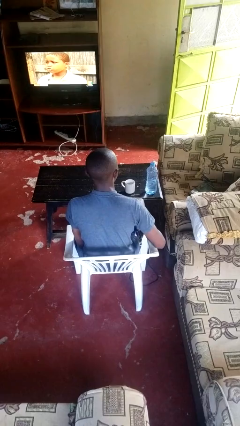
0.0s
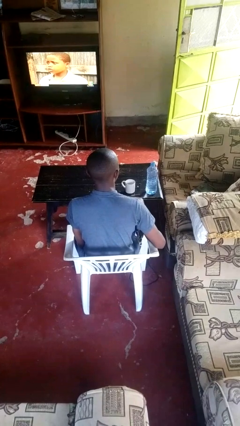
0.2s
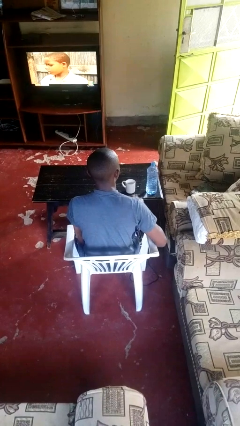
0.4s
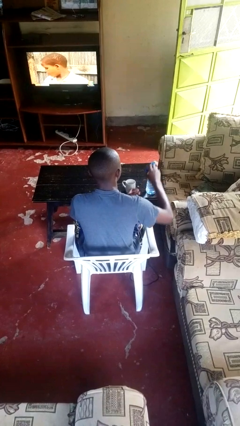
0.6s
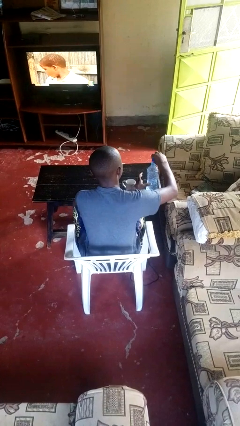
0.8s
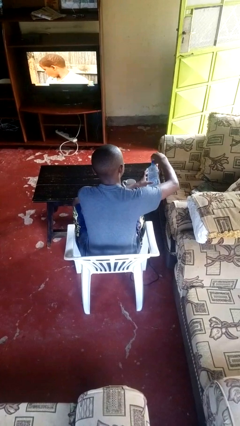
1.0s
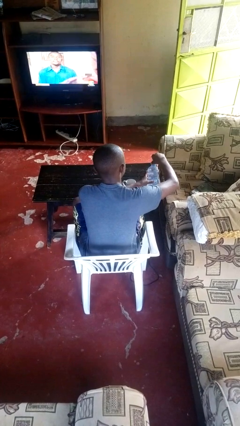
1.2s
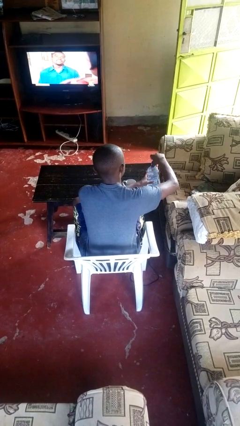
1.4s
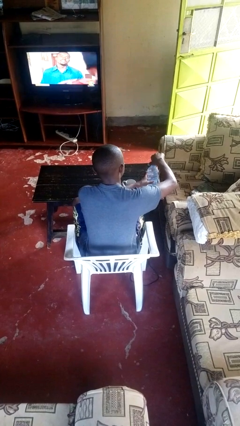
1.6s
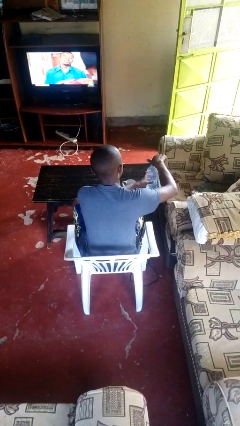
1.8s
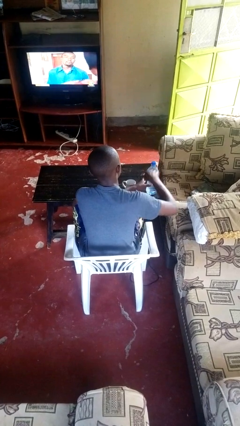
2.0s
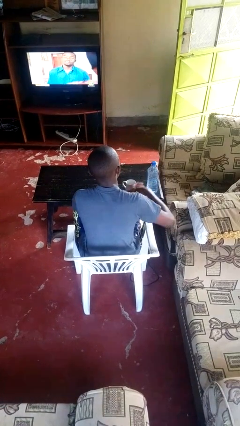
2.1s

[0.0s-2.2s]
person screws lid to bottle

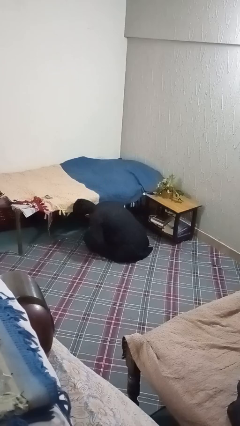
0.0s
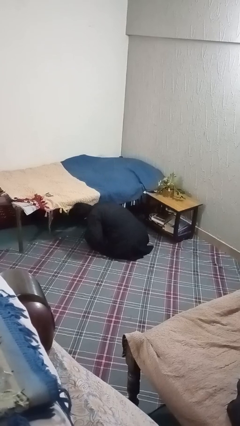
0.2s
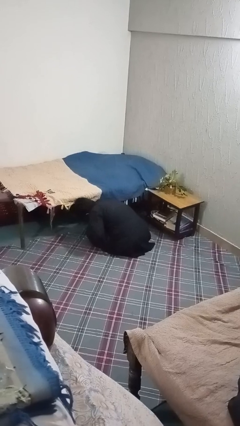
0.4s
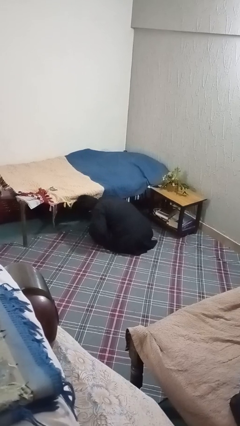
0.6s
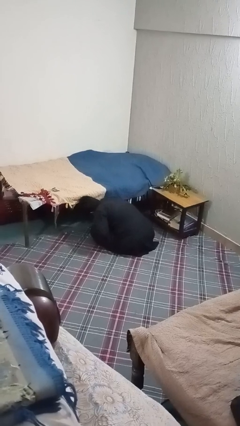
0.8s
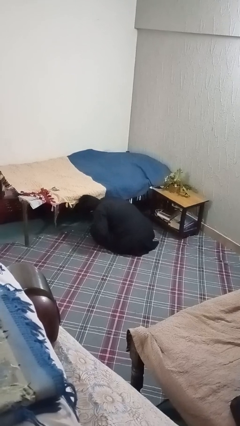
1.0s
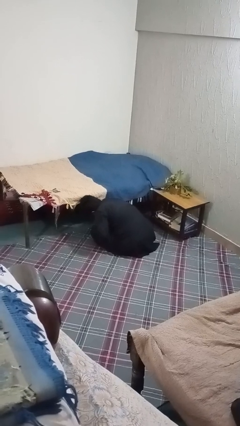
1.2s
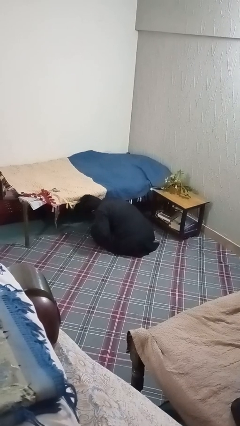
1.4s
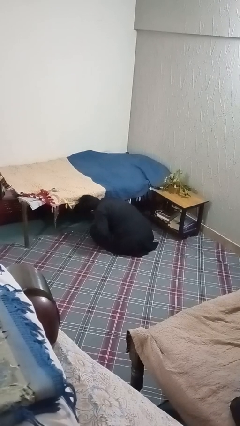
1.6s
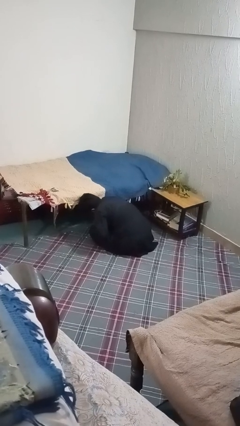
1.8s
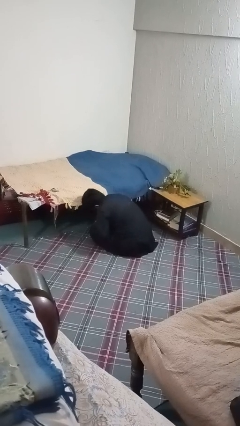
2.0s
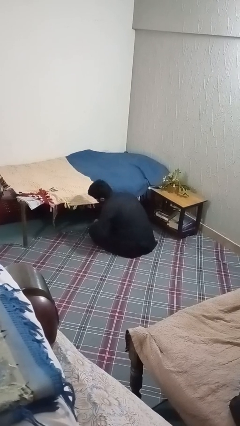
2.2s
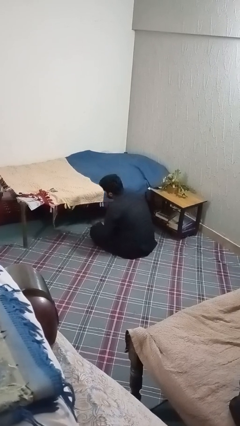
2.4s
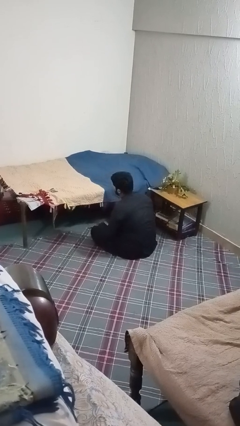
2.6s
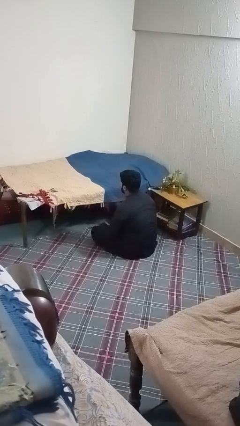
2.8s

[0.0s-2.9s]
person searches under bed

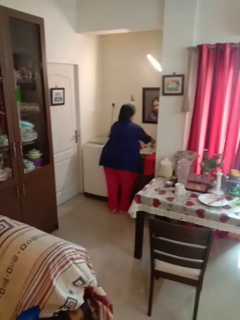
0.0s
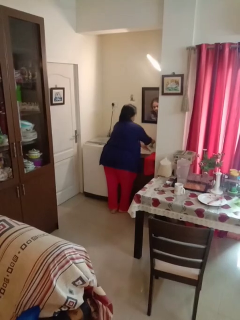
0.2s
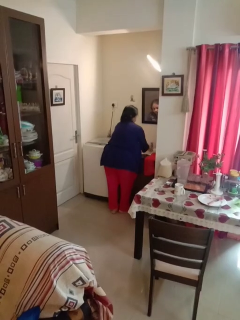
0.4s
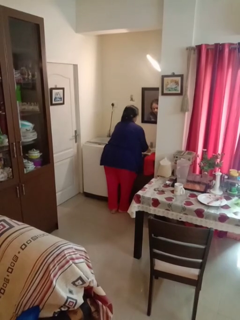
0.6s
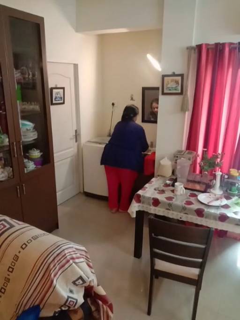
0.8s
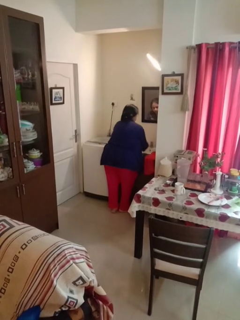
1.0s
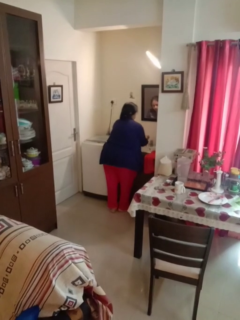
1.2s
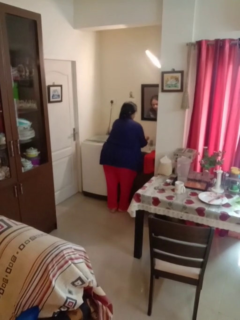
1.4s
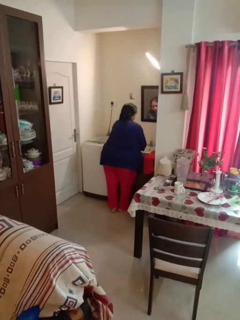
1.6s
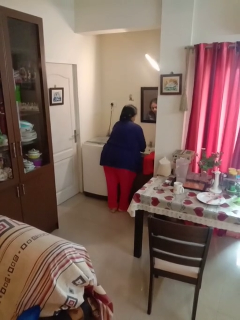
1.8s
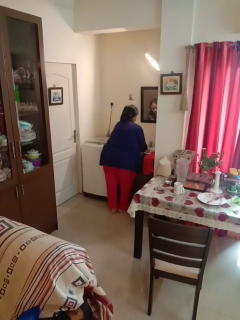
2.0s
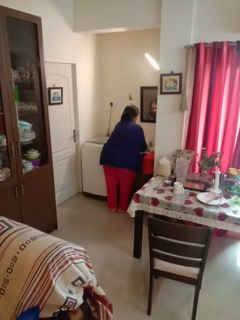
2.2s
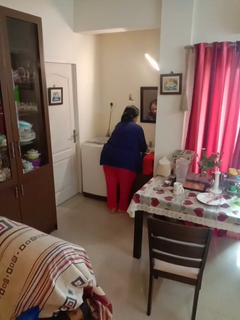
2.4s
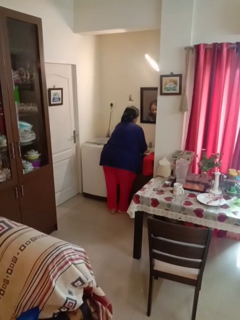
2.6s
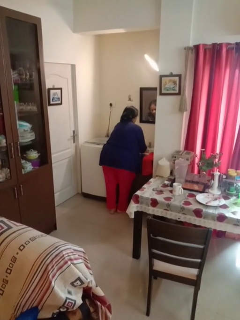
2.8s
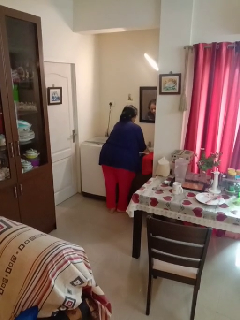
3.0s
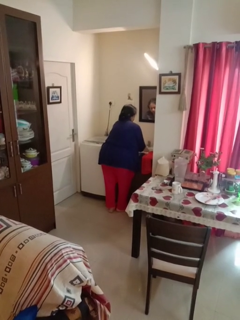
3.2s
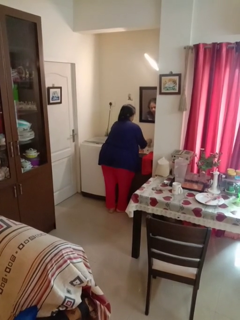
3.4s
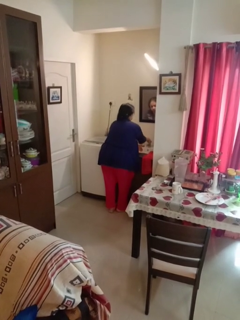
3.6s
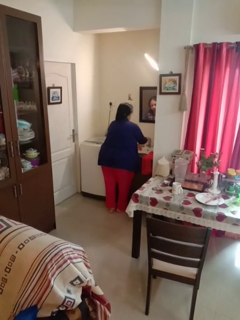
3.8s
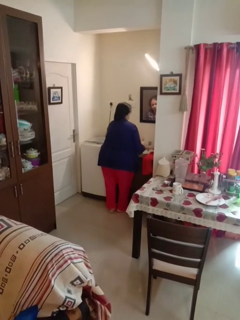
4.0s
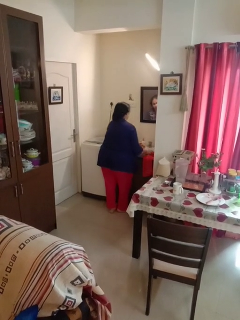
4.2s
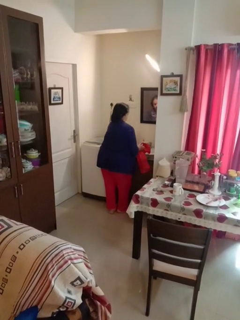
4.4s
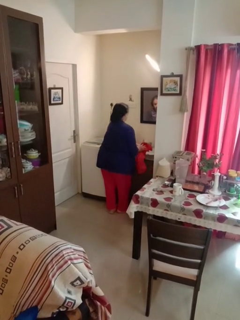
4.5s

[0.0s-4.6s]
person washes hands

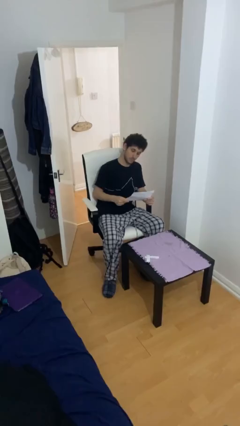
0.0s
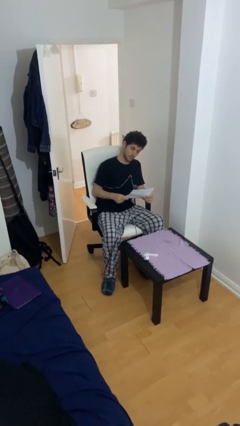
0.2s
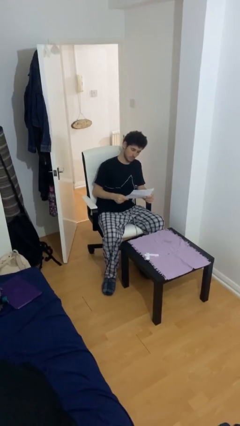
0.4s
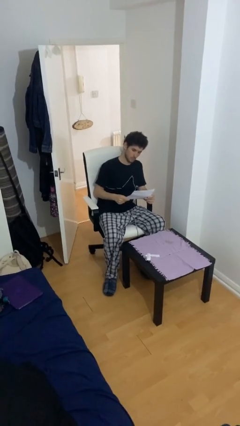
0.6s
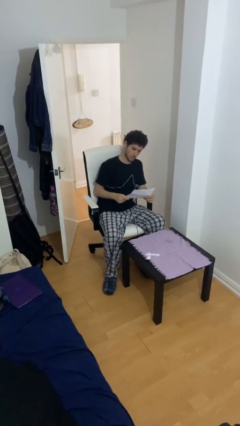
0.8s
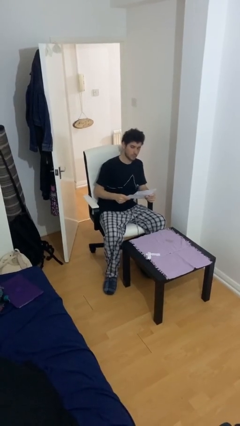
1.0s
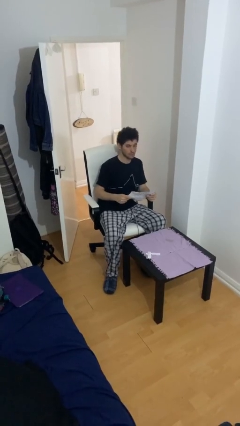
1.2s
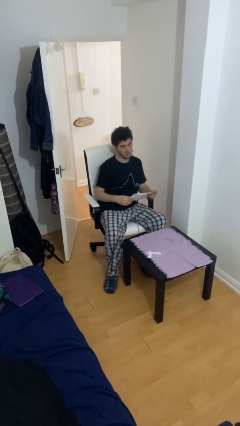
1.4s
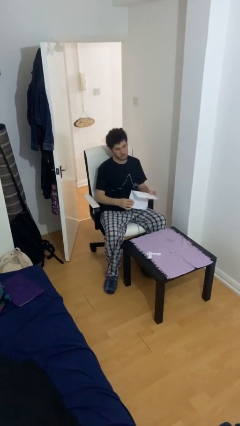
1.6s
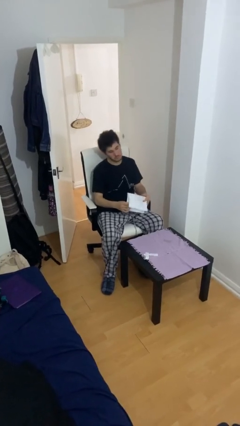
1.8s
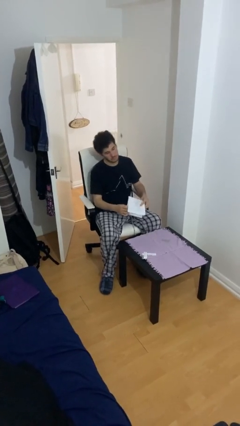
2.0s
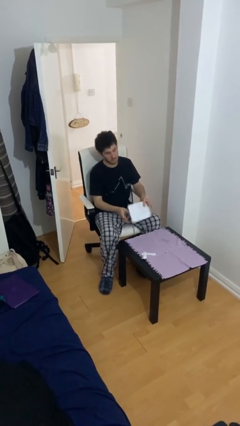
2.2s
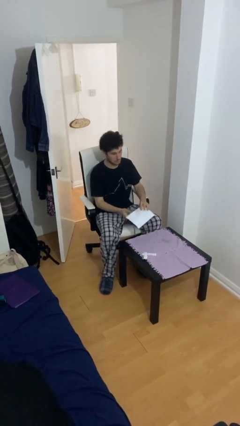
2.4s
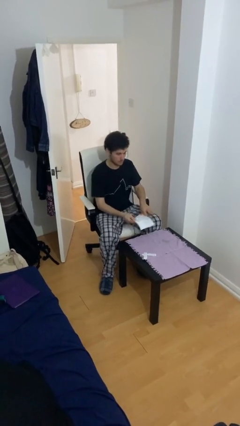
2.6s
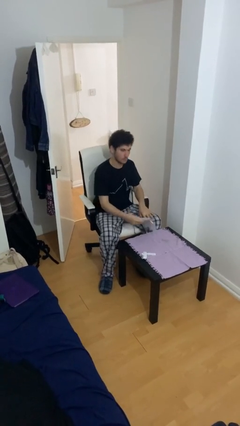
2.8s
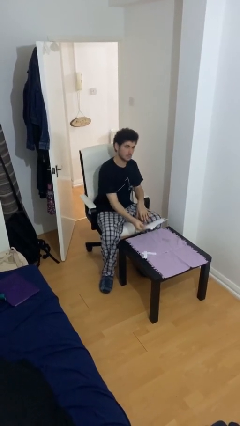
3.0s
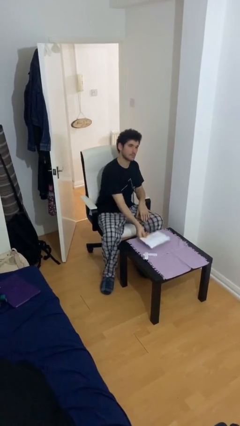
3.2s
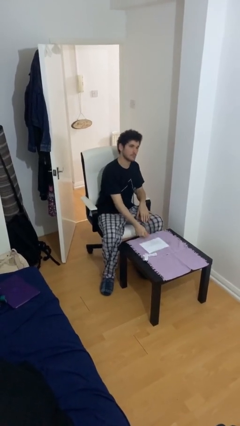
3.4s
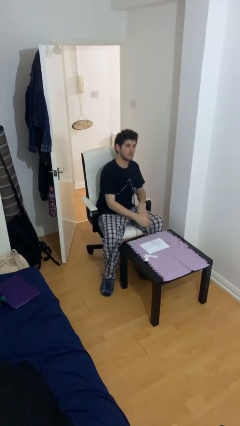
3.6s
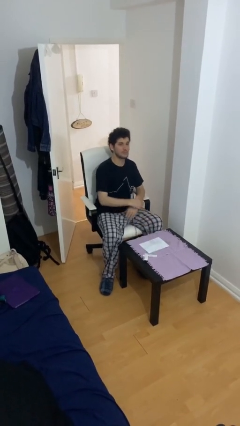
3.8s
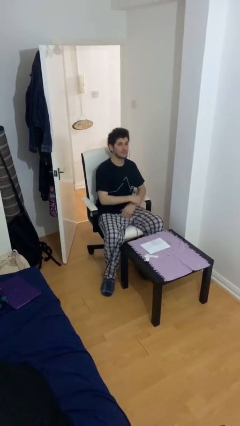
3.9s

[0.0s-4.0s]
person puts down object on table

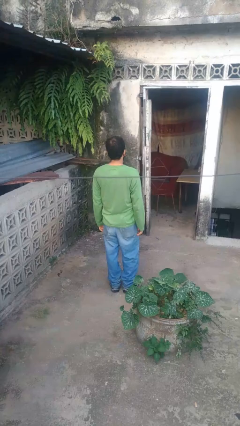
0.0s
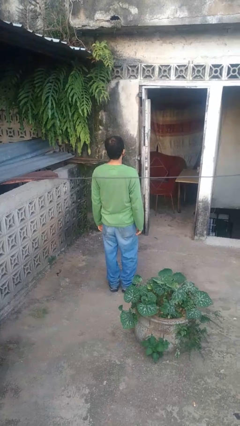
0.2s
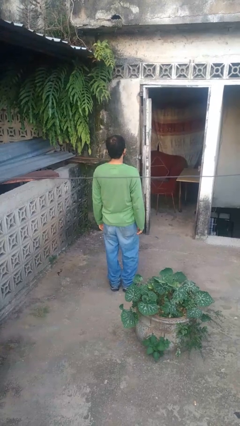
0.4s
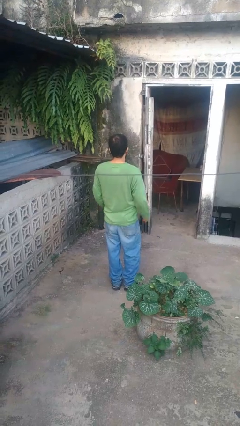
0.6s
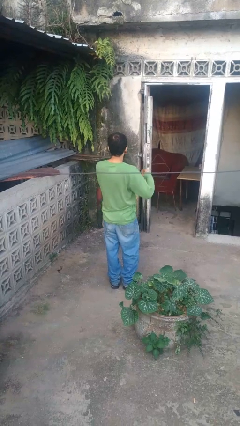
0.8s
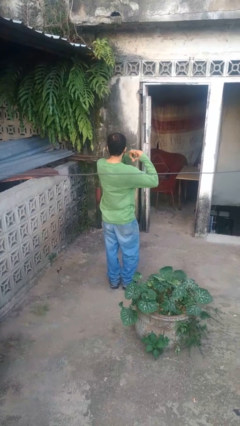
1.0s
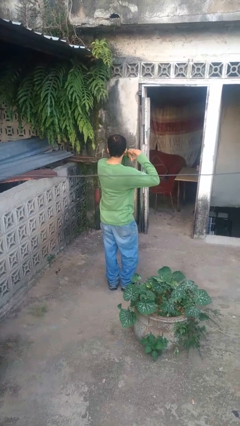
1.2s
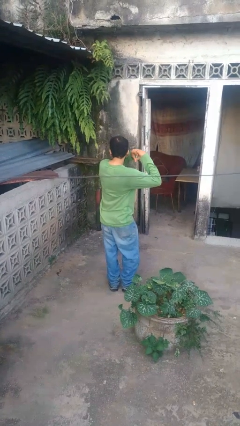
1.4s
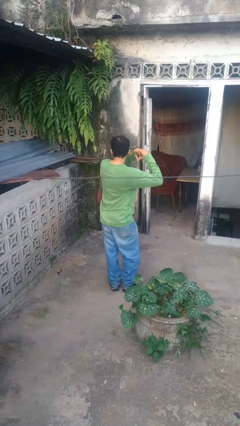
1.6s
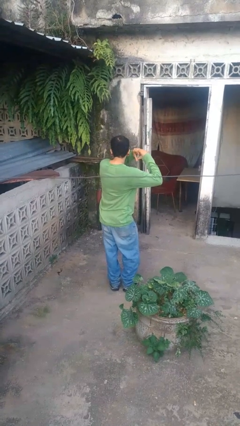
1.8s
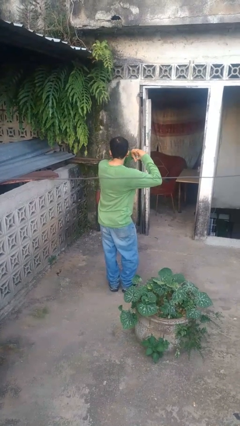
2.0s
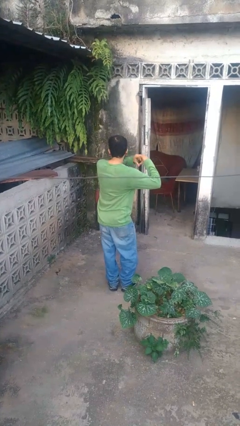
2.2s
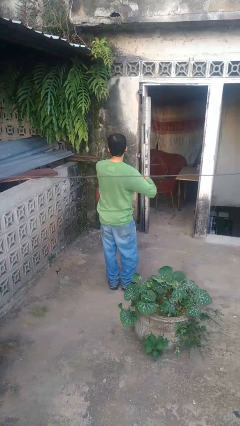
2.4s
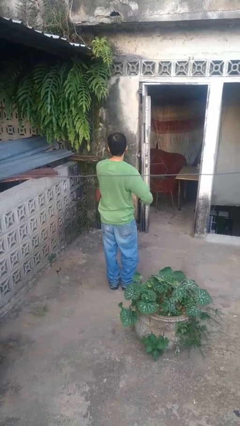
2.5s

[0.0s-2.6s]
person gestures heart

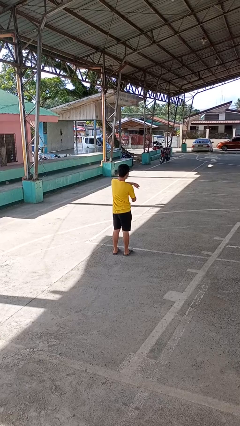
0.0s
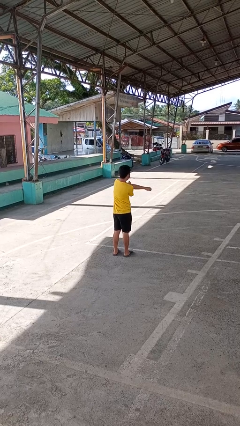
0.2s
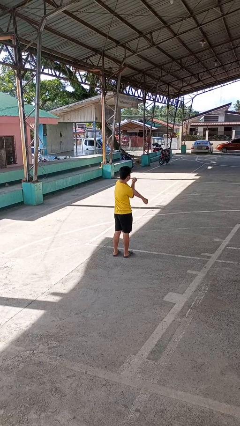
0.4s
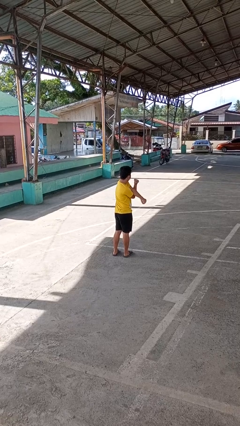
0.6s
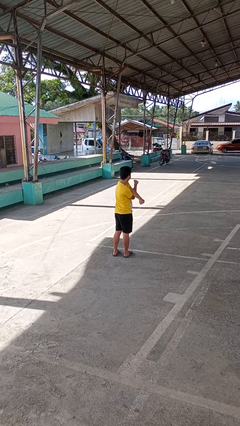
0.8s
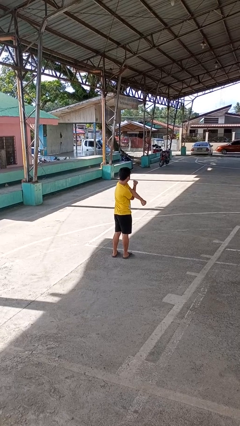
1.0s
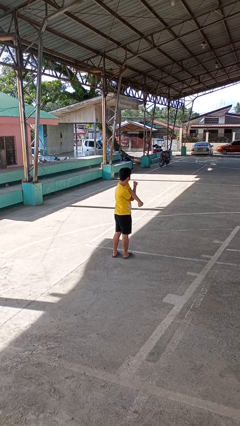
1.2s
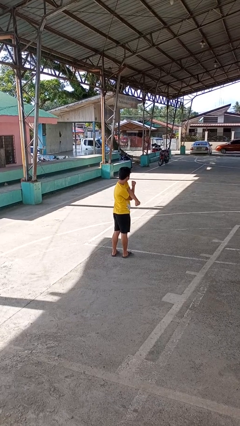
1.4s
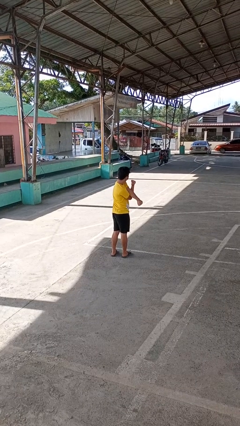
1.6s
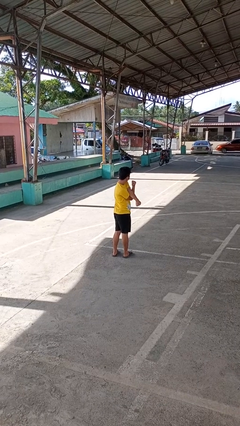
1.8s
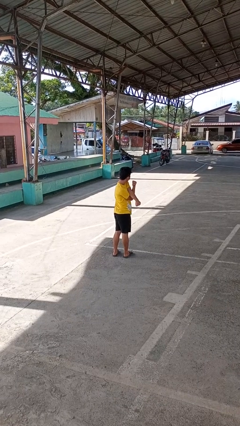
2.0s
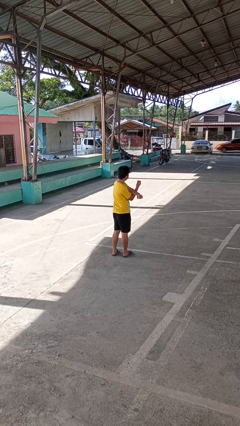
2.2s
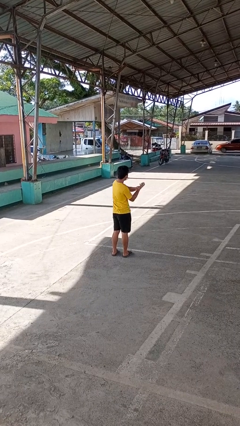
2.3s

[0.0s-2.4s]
person stretches arms to side
